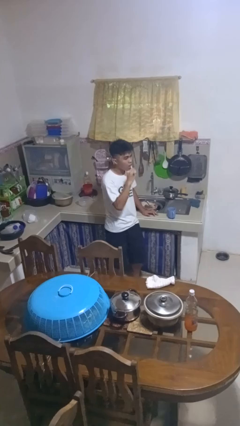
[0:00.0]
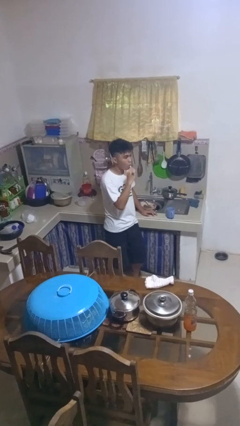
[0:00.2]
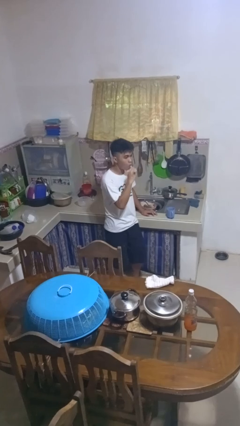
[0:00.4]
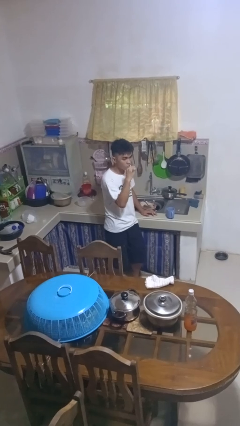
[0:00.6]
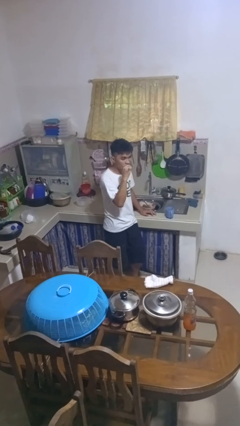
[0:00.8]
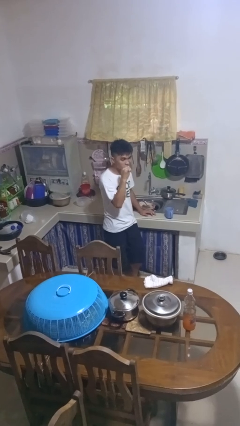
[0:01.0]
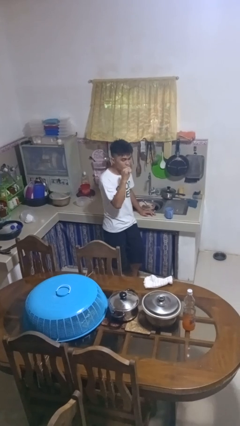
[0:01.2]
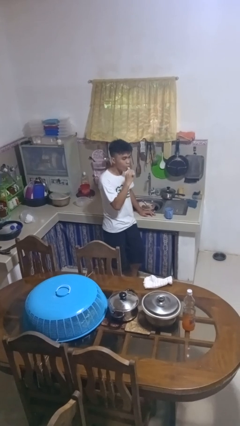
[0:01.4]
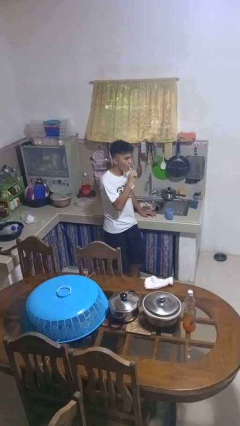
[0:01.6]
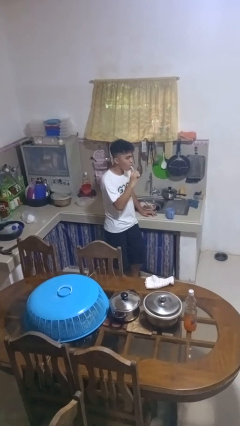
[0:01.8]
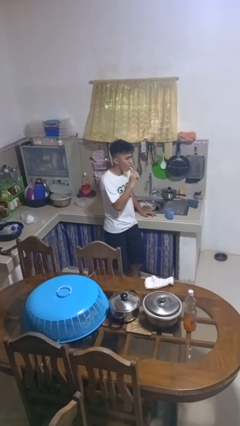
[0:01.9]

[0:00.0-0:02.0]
person brushes teeth

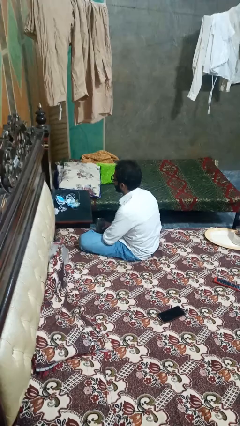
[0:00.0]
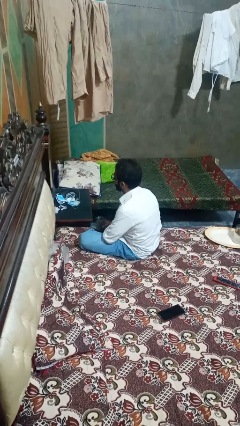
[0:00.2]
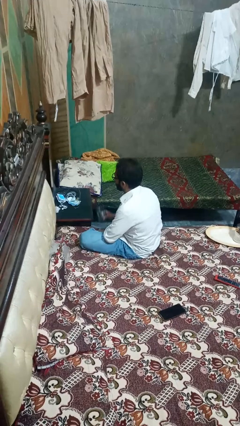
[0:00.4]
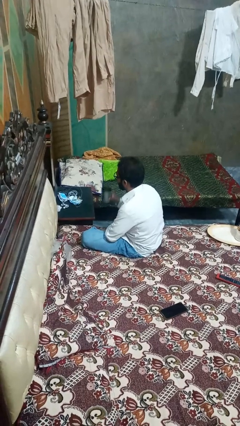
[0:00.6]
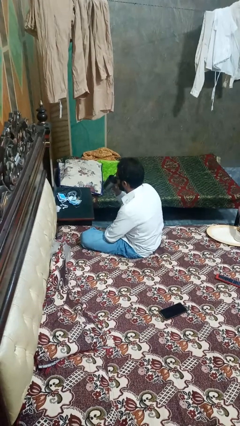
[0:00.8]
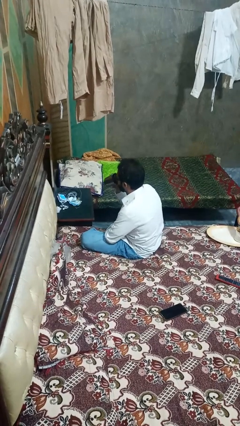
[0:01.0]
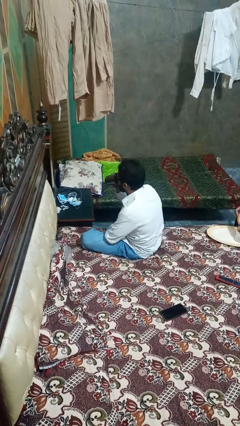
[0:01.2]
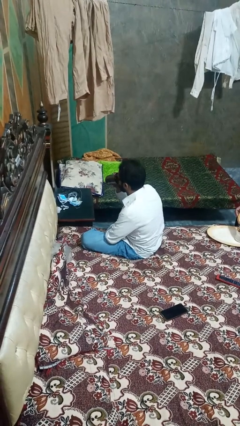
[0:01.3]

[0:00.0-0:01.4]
person drinks from mug

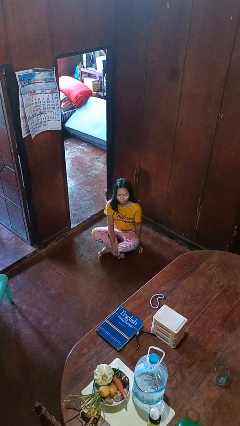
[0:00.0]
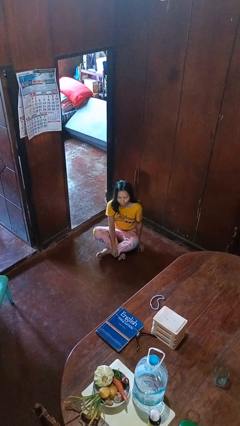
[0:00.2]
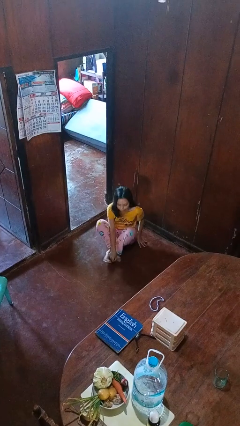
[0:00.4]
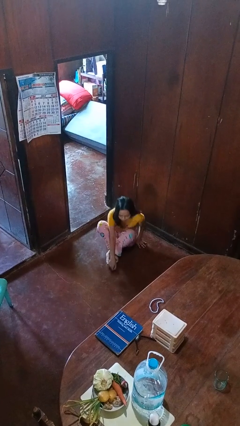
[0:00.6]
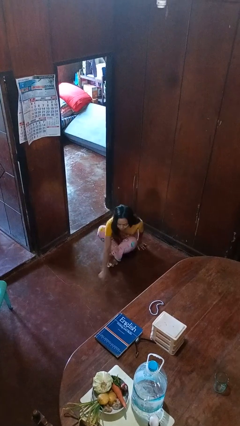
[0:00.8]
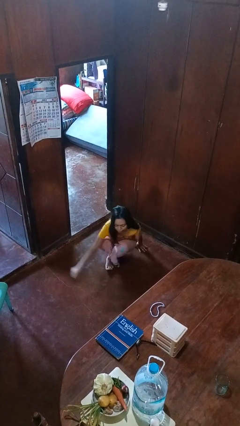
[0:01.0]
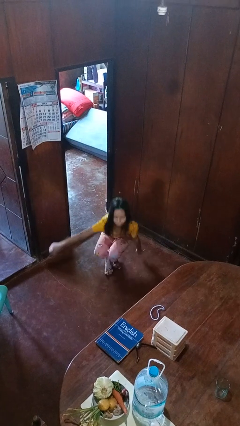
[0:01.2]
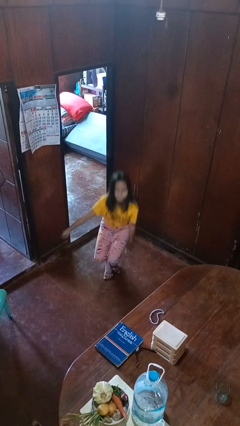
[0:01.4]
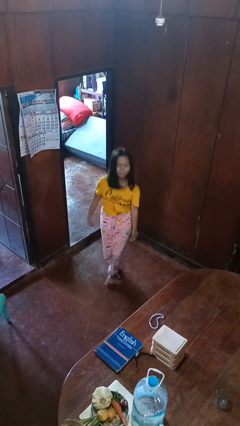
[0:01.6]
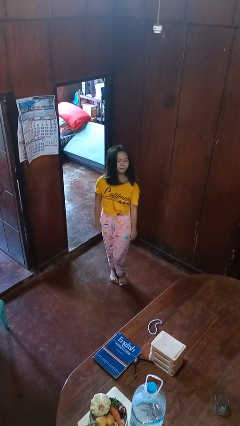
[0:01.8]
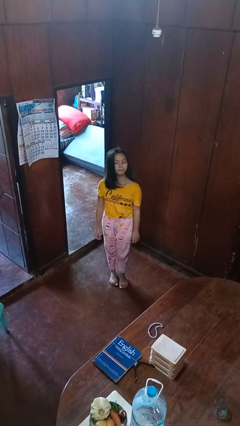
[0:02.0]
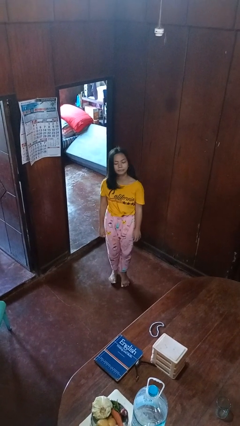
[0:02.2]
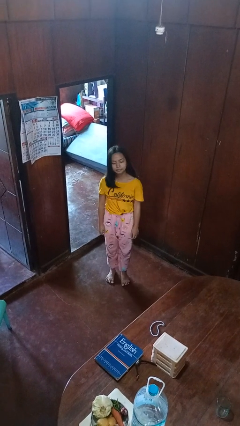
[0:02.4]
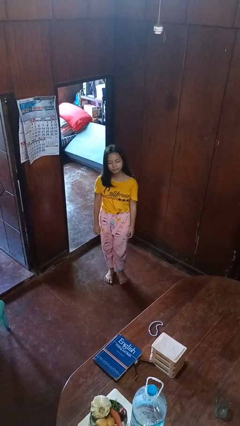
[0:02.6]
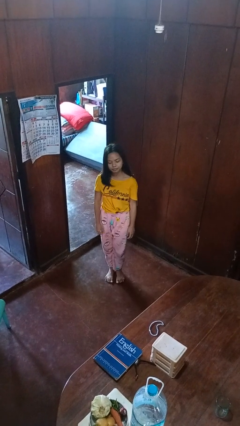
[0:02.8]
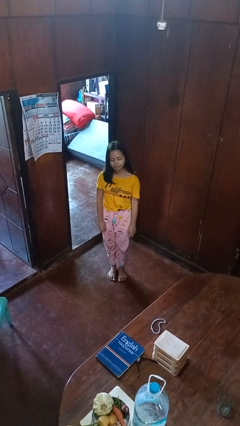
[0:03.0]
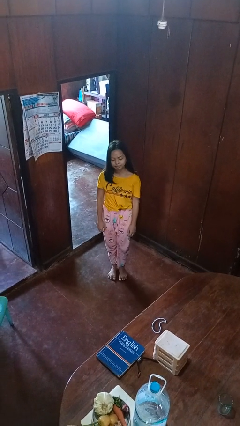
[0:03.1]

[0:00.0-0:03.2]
person stands up from floor

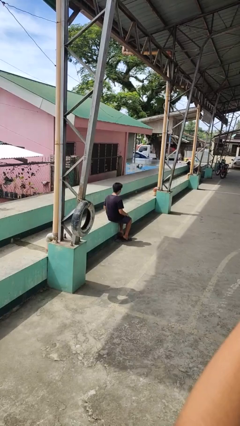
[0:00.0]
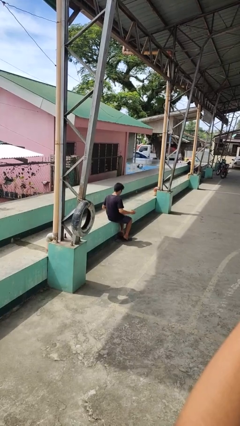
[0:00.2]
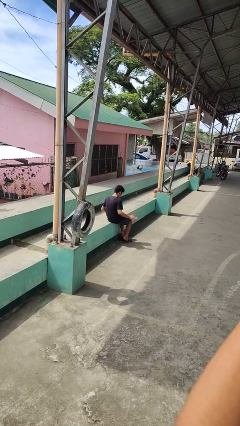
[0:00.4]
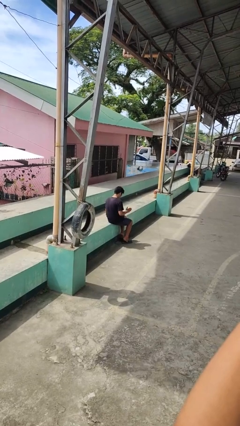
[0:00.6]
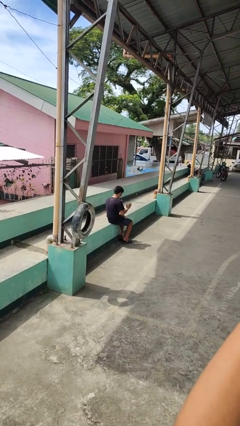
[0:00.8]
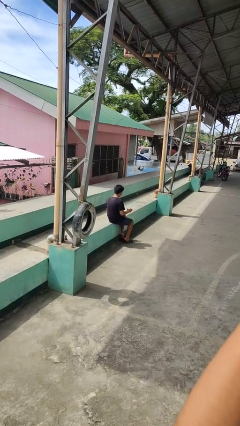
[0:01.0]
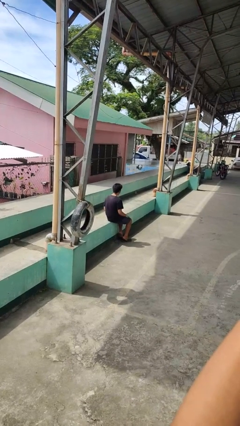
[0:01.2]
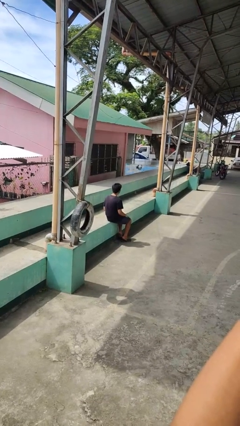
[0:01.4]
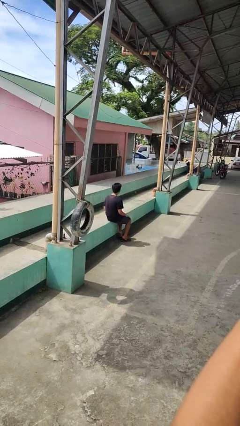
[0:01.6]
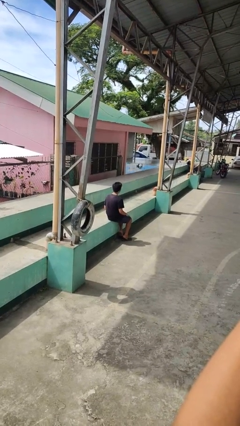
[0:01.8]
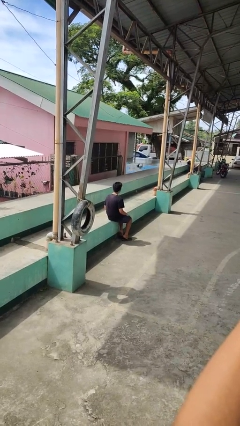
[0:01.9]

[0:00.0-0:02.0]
person slaps hands on thighs

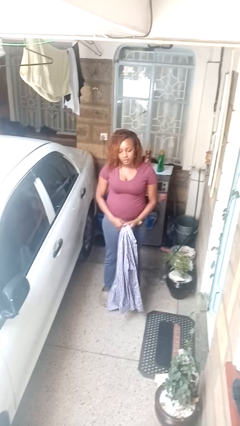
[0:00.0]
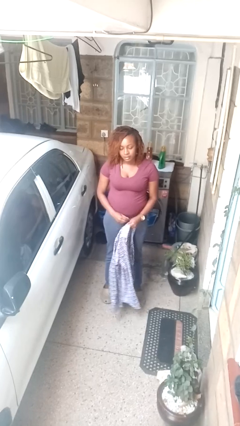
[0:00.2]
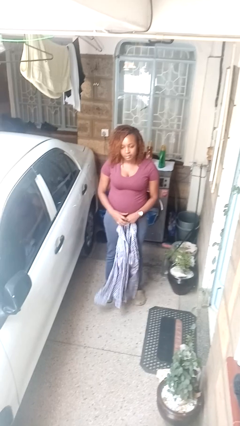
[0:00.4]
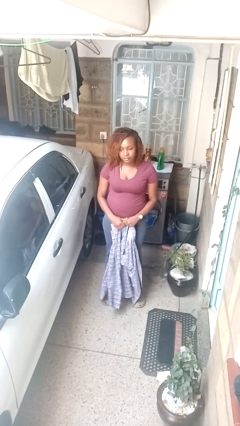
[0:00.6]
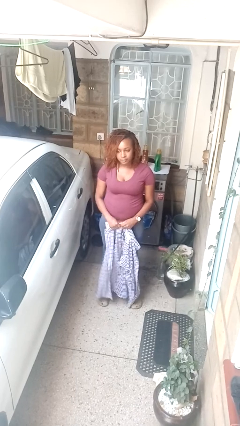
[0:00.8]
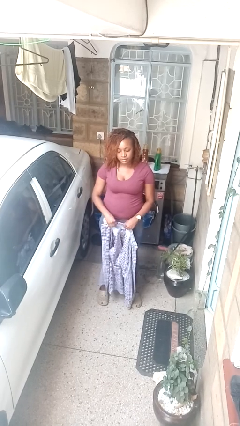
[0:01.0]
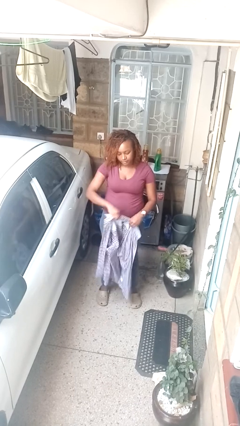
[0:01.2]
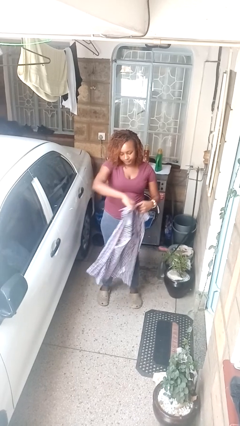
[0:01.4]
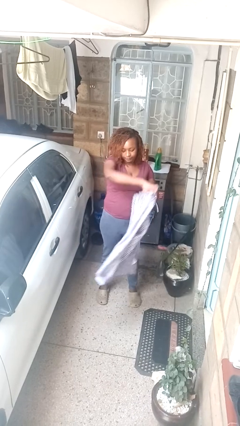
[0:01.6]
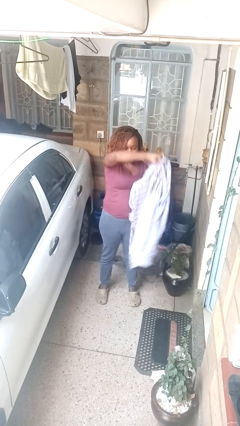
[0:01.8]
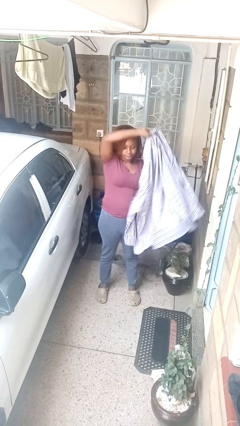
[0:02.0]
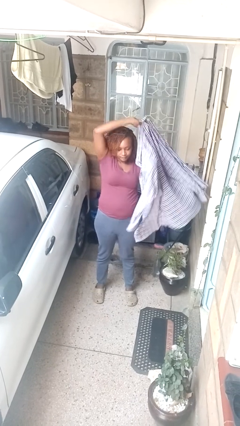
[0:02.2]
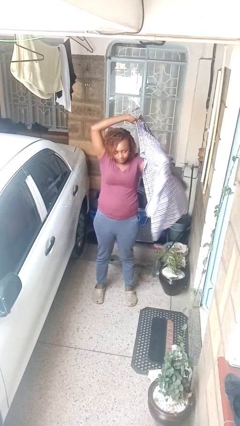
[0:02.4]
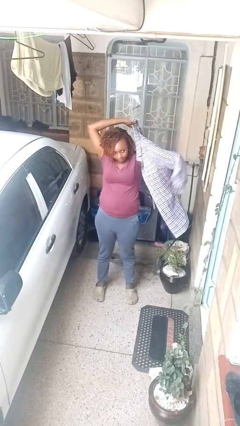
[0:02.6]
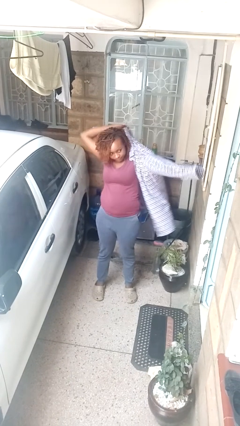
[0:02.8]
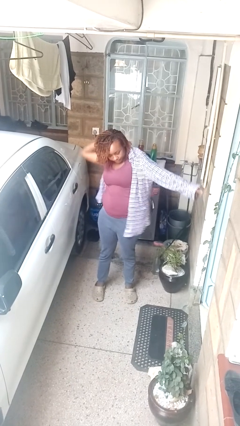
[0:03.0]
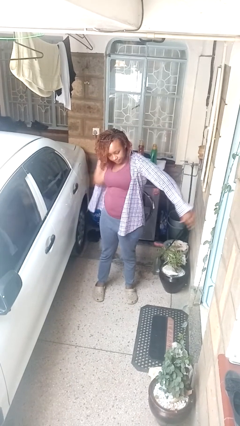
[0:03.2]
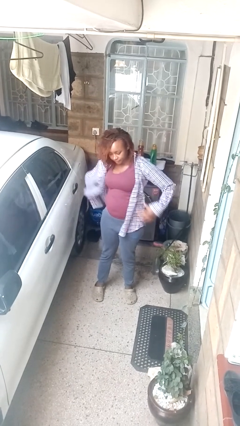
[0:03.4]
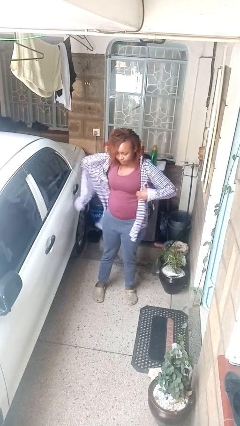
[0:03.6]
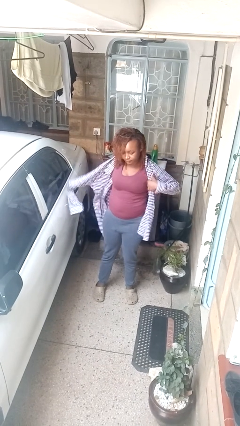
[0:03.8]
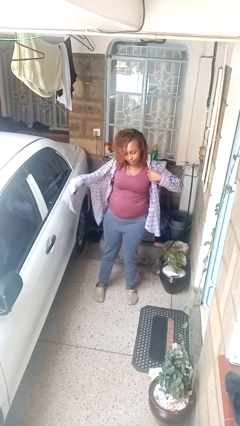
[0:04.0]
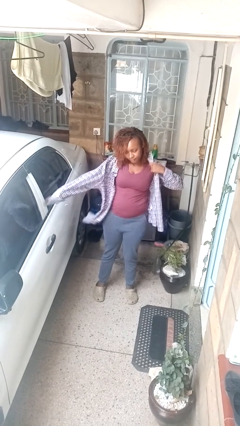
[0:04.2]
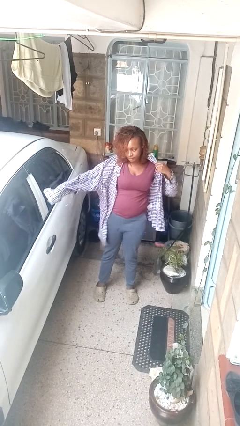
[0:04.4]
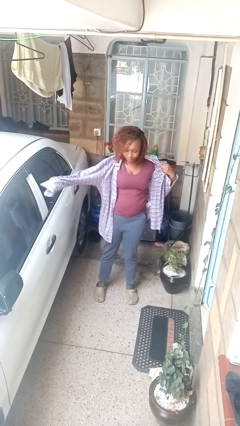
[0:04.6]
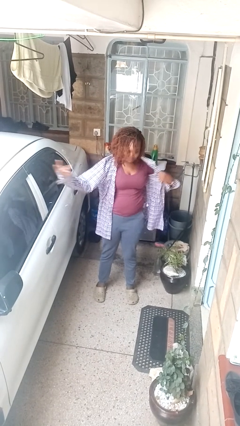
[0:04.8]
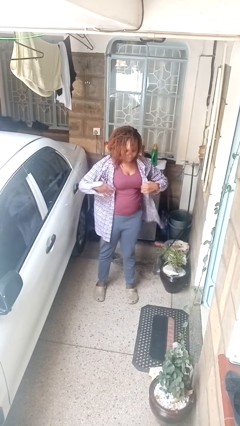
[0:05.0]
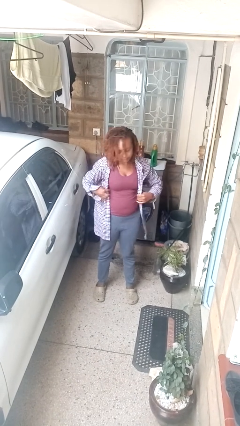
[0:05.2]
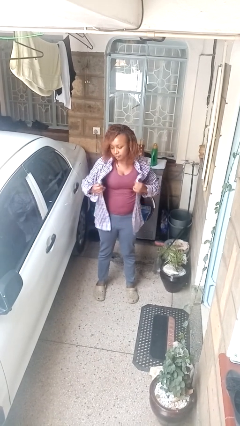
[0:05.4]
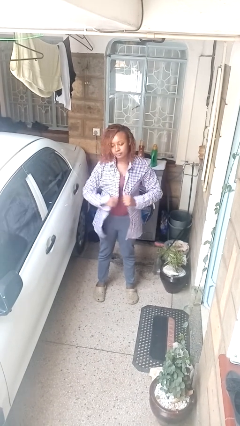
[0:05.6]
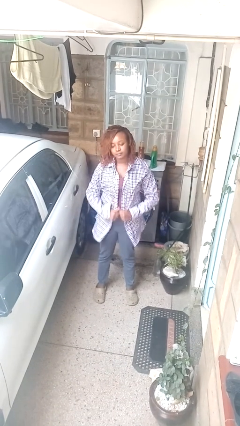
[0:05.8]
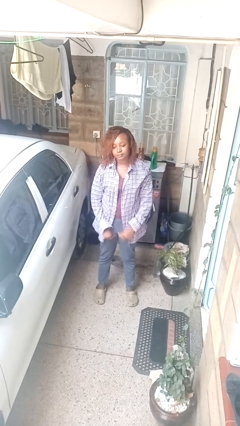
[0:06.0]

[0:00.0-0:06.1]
person puts on shirt

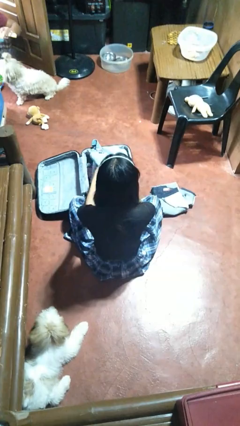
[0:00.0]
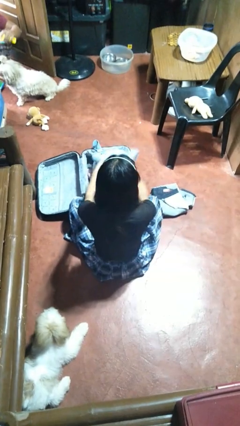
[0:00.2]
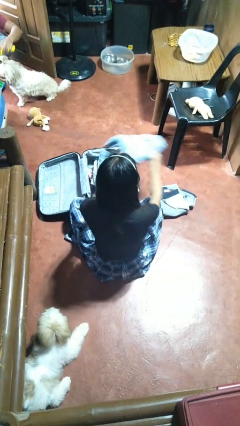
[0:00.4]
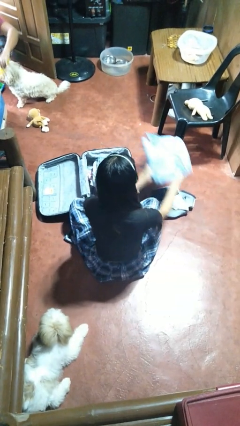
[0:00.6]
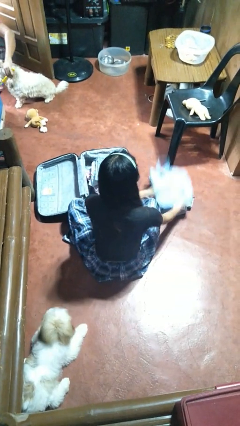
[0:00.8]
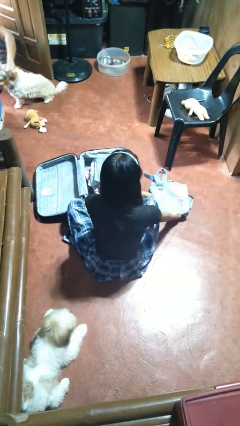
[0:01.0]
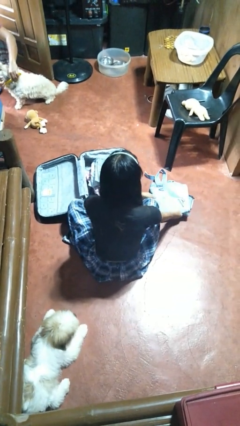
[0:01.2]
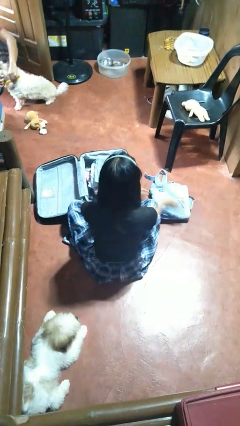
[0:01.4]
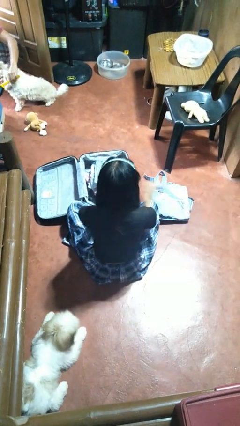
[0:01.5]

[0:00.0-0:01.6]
person unloads clothes from suitcase

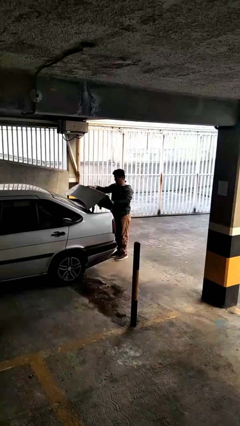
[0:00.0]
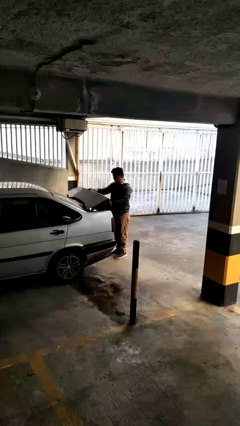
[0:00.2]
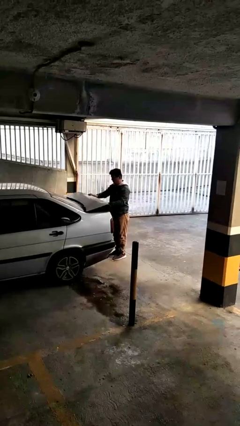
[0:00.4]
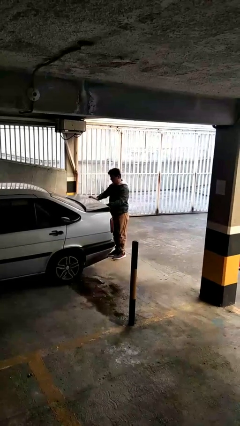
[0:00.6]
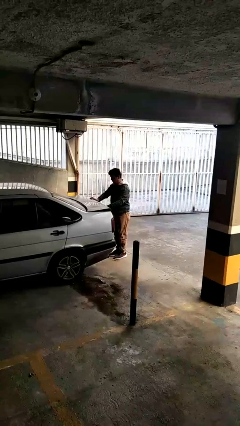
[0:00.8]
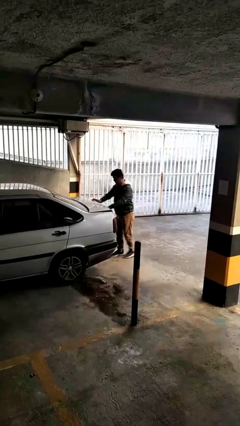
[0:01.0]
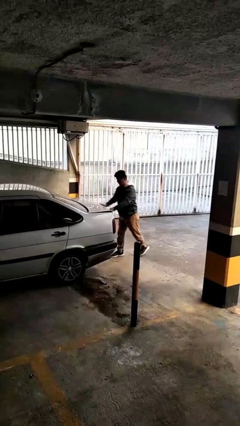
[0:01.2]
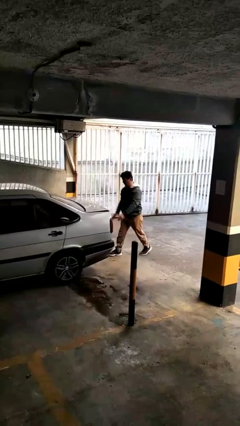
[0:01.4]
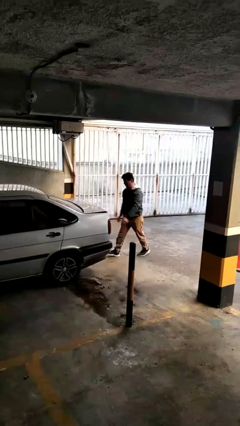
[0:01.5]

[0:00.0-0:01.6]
person closes car trunk
